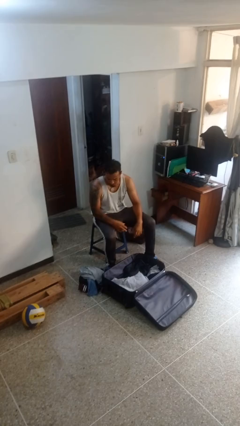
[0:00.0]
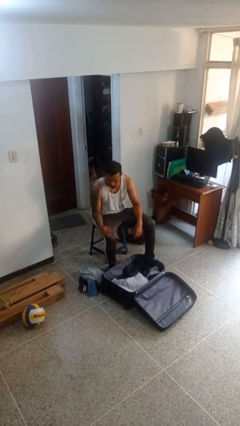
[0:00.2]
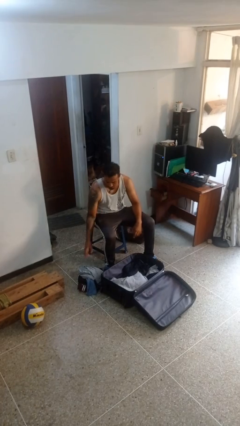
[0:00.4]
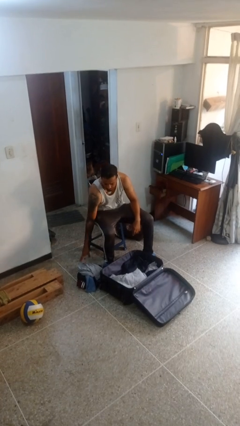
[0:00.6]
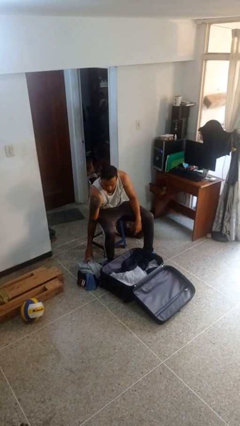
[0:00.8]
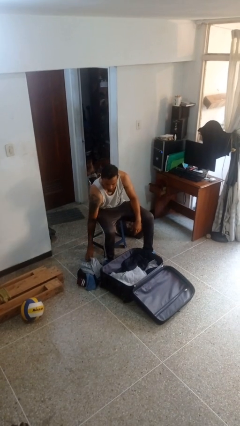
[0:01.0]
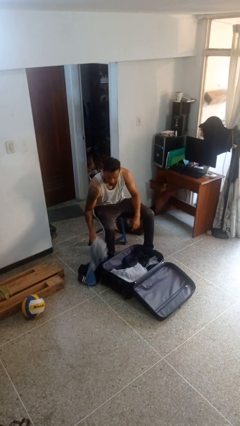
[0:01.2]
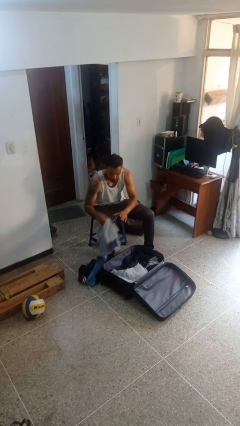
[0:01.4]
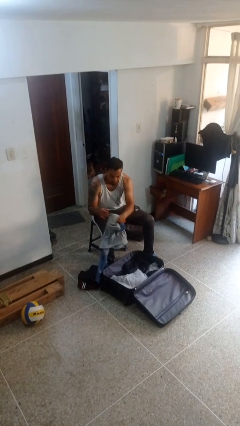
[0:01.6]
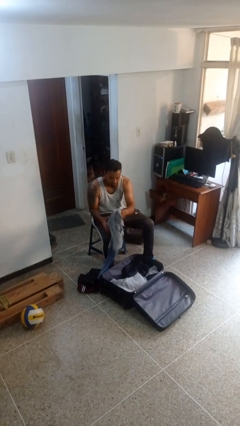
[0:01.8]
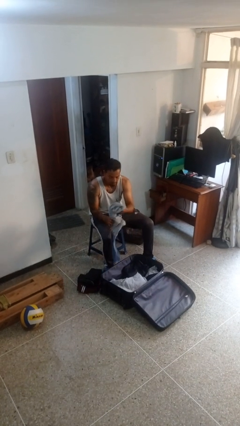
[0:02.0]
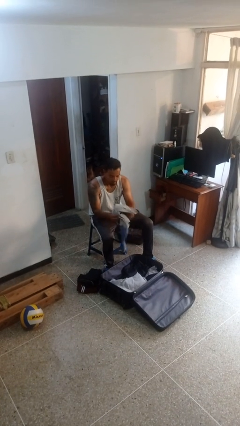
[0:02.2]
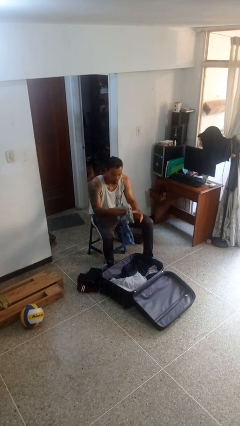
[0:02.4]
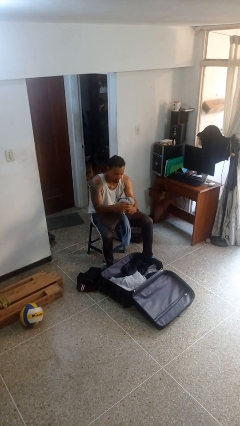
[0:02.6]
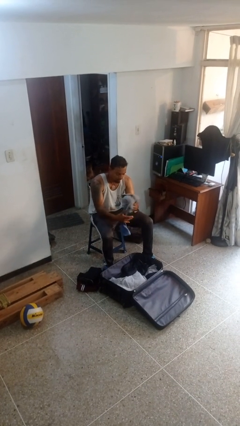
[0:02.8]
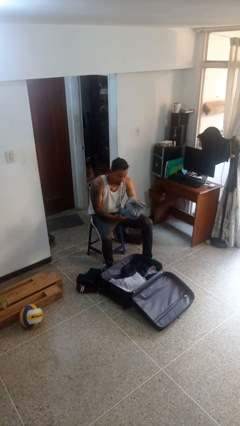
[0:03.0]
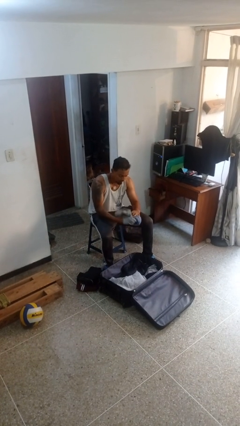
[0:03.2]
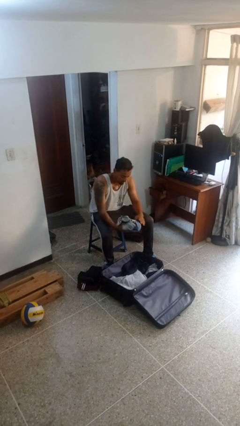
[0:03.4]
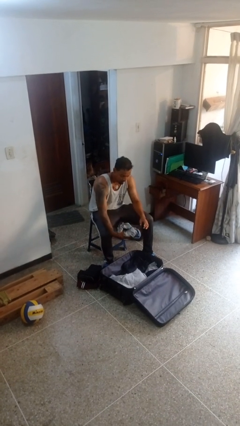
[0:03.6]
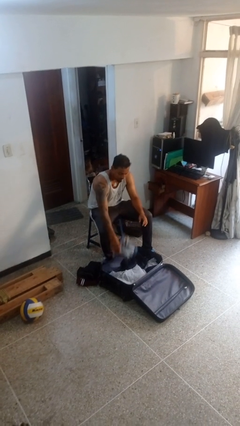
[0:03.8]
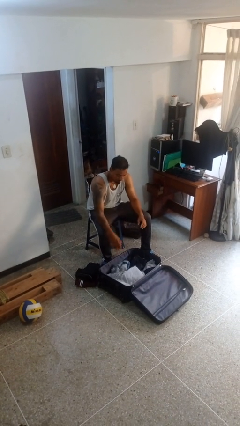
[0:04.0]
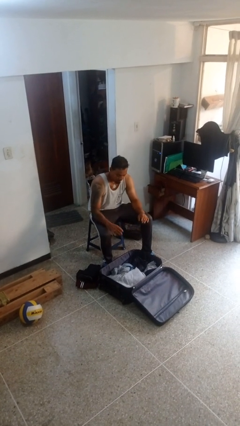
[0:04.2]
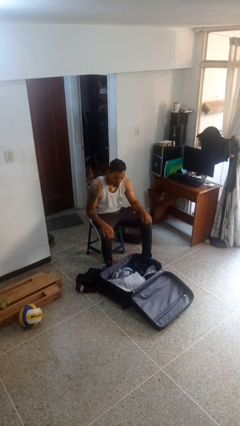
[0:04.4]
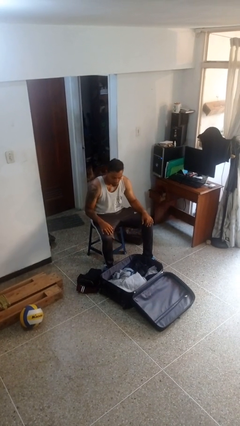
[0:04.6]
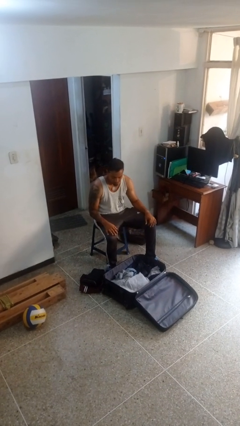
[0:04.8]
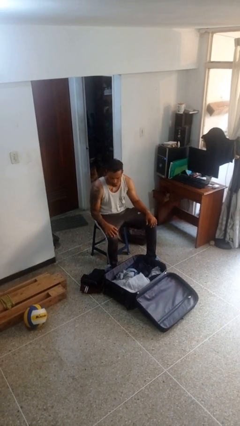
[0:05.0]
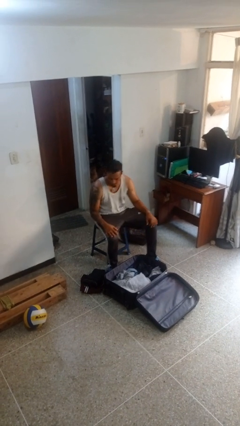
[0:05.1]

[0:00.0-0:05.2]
person loads clothes into suitcase

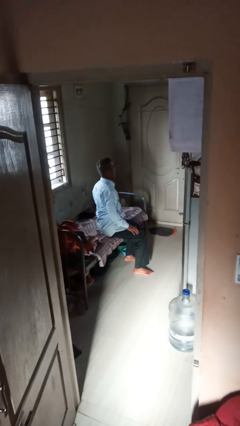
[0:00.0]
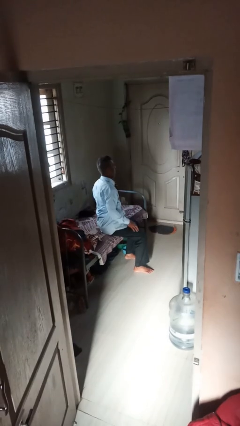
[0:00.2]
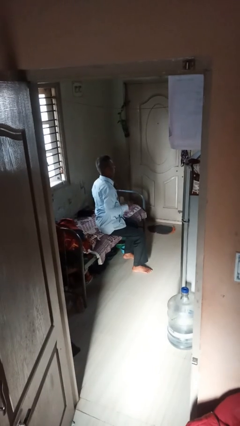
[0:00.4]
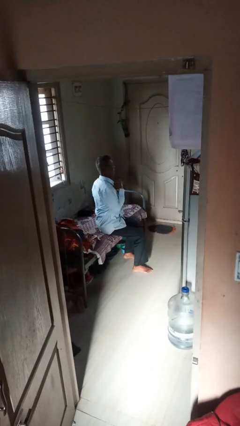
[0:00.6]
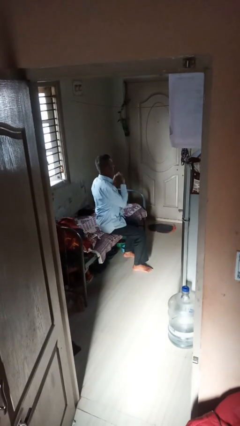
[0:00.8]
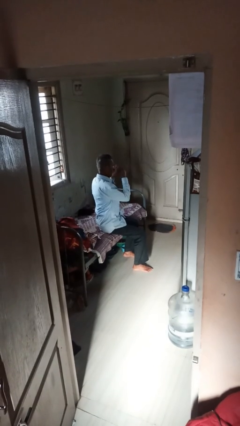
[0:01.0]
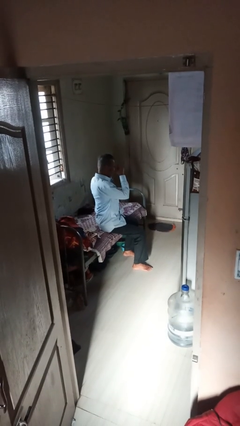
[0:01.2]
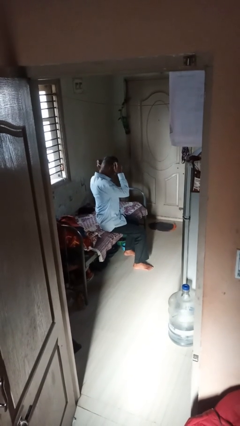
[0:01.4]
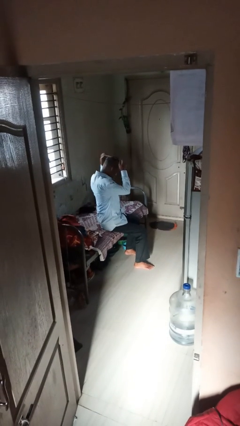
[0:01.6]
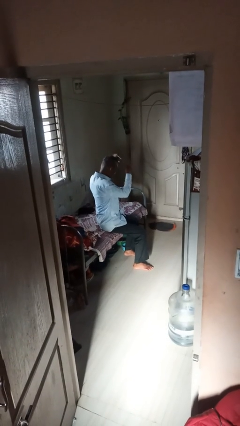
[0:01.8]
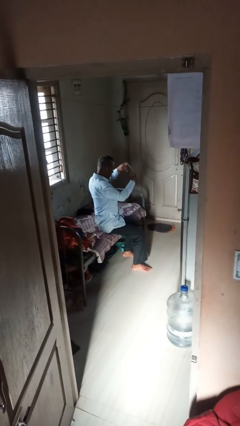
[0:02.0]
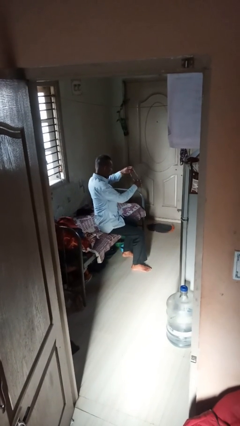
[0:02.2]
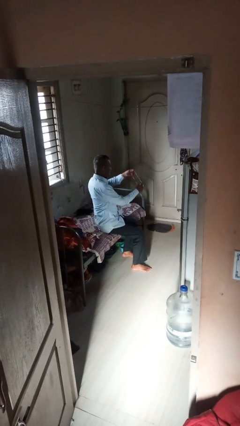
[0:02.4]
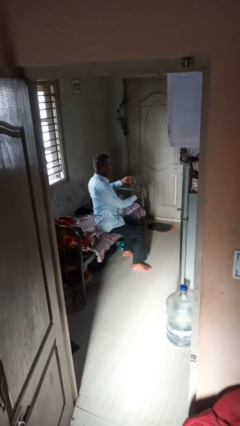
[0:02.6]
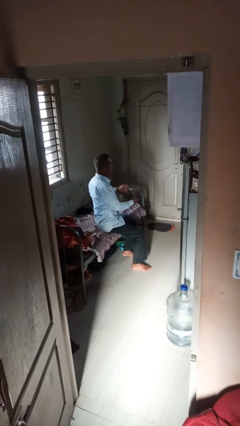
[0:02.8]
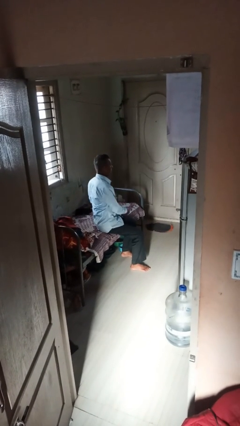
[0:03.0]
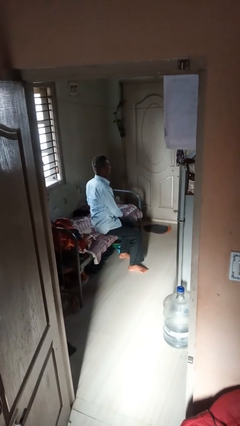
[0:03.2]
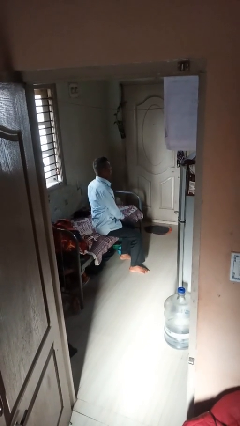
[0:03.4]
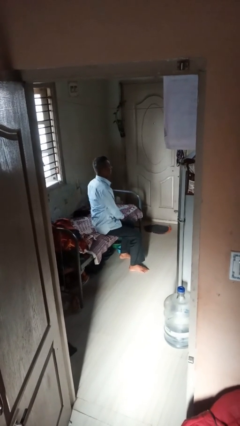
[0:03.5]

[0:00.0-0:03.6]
person takes off necklace

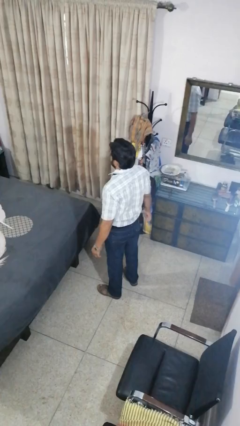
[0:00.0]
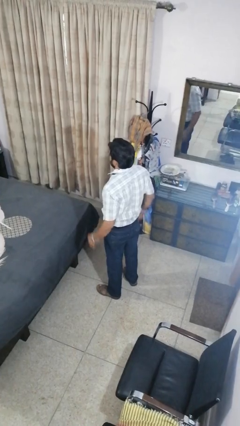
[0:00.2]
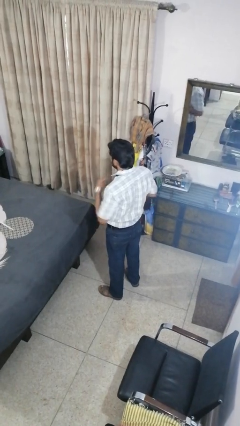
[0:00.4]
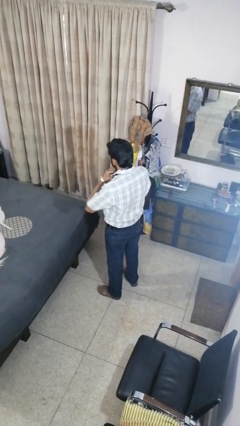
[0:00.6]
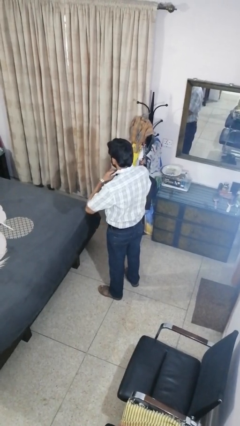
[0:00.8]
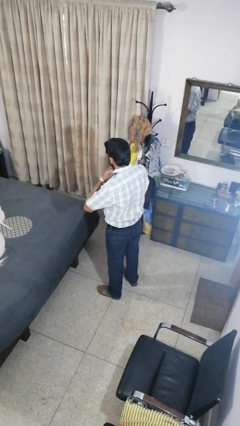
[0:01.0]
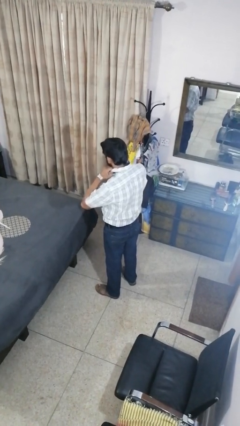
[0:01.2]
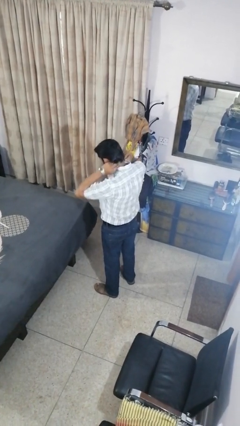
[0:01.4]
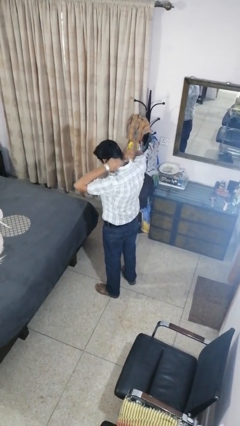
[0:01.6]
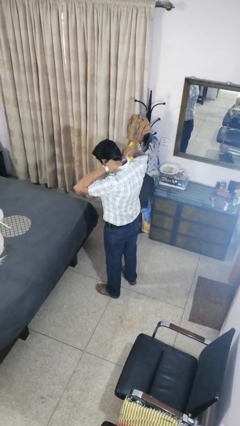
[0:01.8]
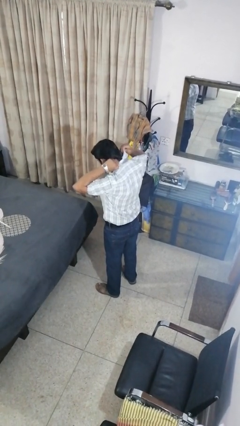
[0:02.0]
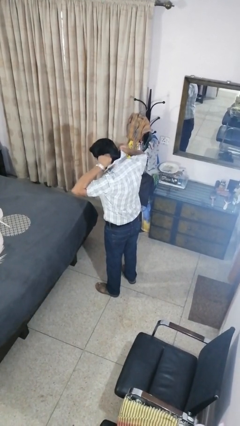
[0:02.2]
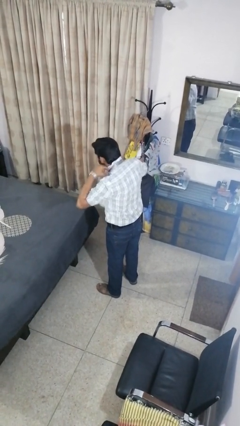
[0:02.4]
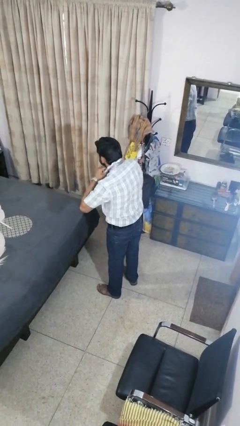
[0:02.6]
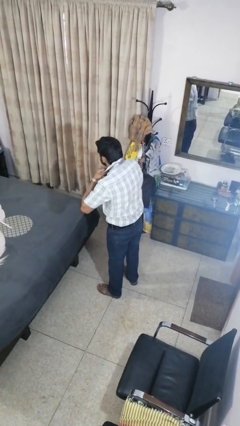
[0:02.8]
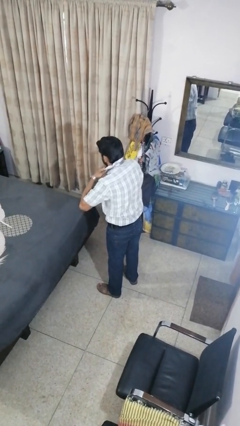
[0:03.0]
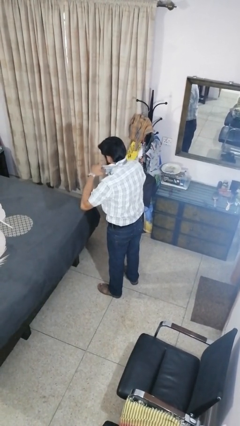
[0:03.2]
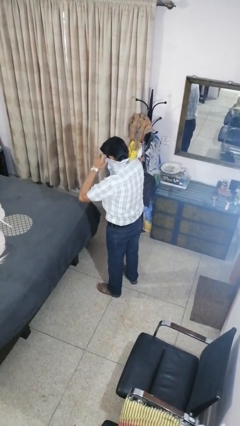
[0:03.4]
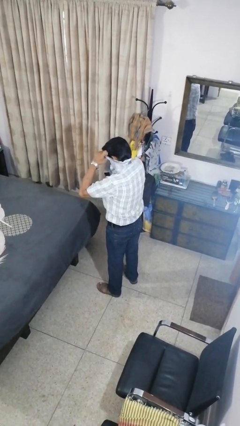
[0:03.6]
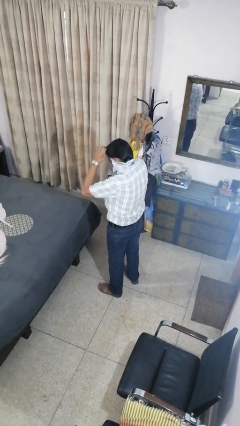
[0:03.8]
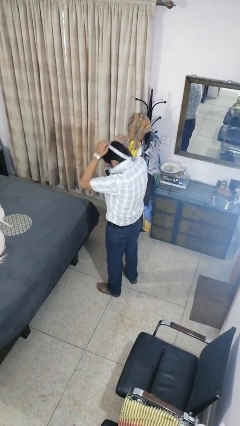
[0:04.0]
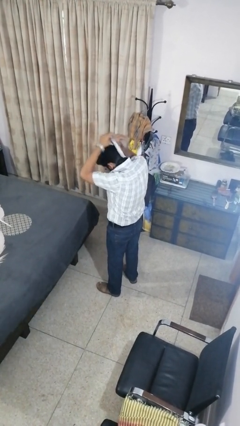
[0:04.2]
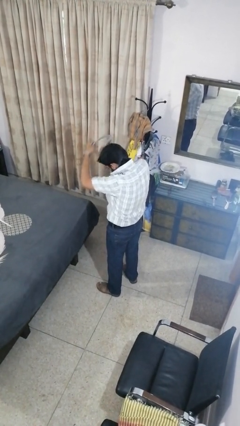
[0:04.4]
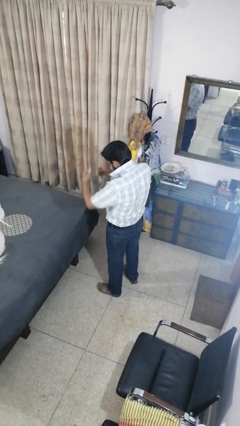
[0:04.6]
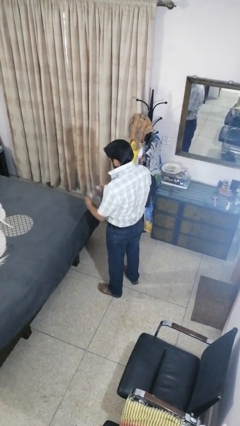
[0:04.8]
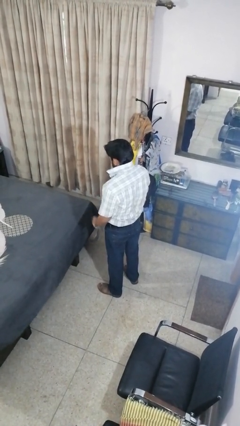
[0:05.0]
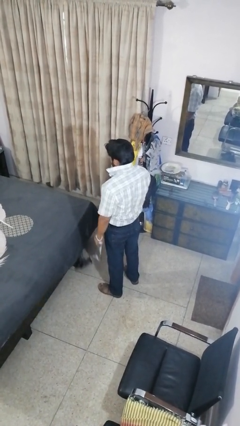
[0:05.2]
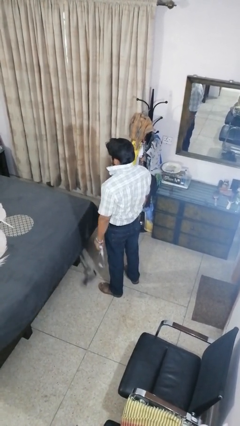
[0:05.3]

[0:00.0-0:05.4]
person takes off necktie

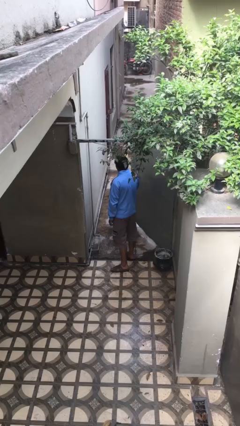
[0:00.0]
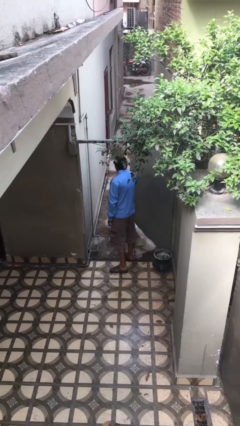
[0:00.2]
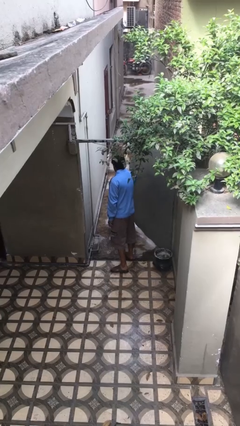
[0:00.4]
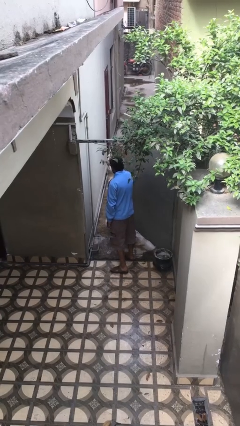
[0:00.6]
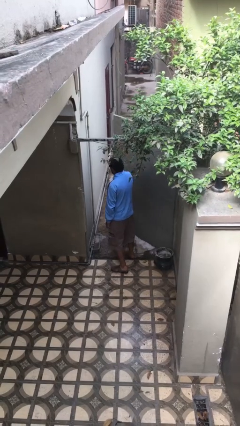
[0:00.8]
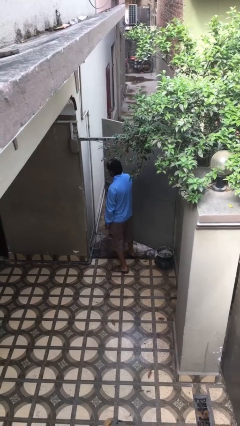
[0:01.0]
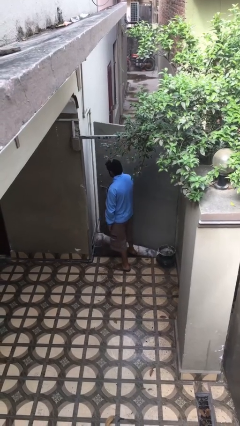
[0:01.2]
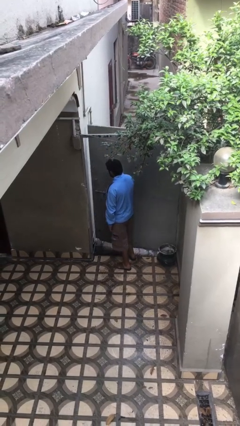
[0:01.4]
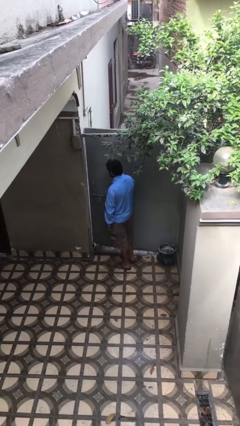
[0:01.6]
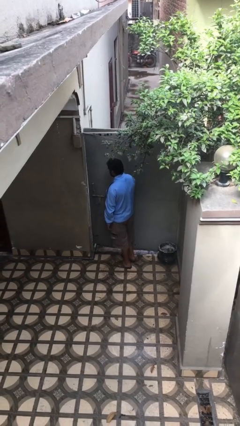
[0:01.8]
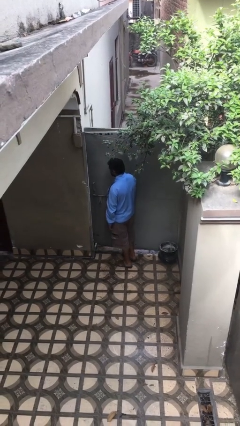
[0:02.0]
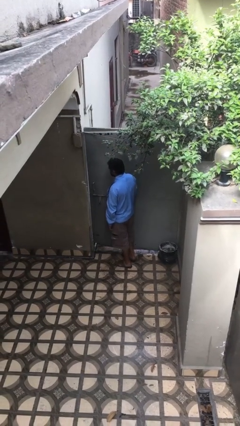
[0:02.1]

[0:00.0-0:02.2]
person closes facility door

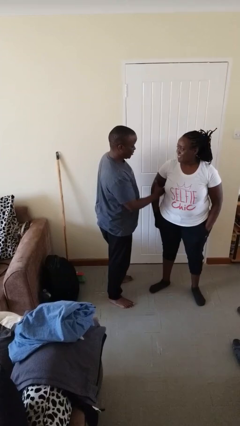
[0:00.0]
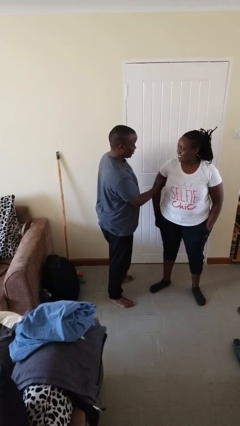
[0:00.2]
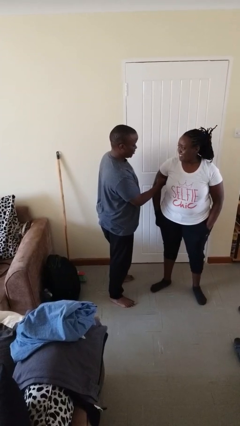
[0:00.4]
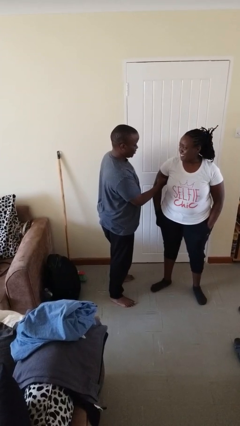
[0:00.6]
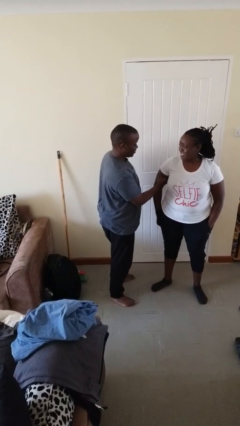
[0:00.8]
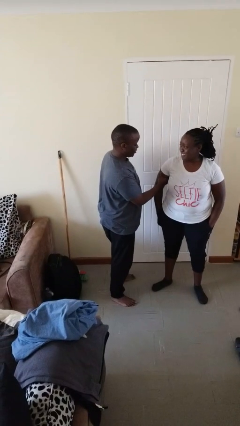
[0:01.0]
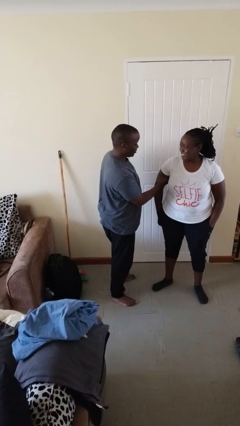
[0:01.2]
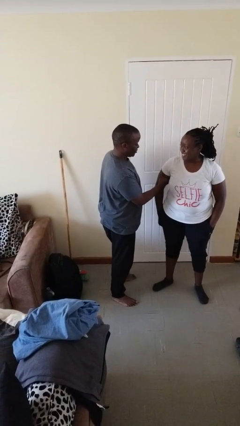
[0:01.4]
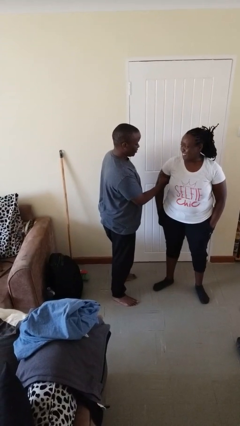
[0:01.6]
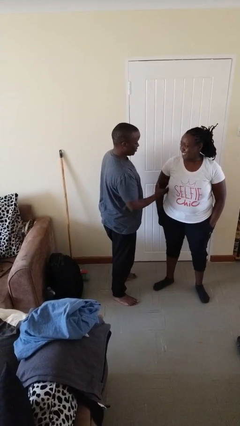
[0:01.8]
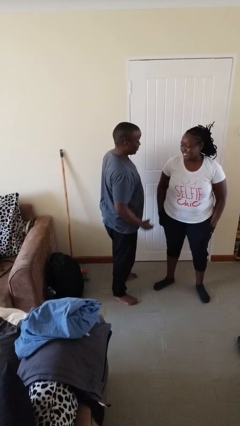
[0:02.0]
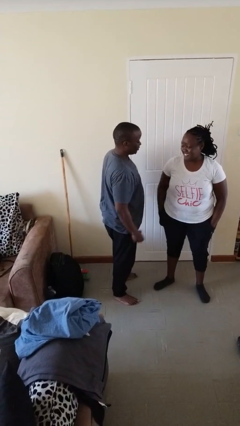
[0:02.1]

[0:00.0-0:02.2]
person grabs person by bicep
